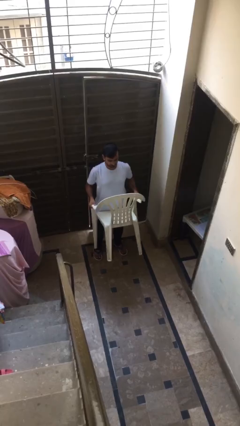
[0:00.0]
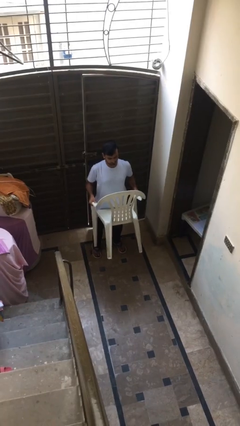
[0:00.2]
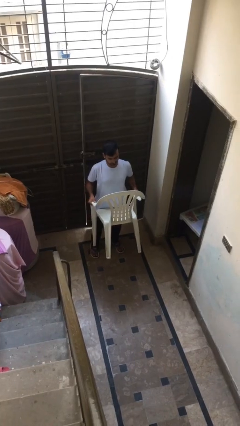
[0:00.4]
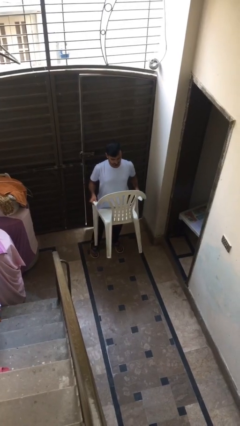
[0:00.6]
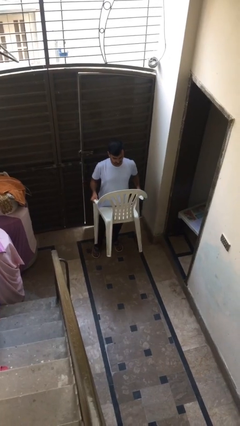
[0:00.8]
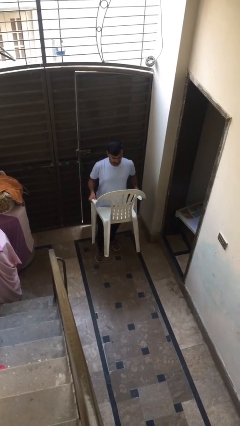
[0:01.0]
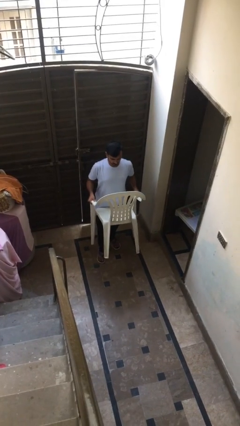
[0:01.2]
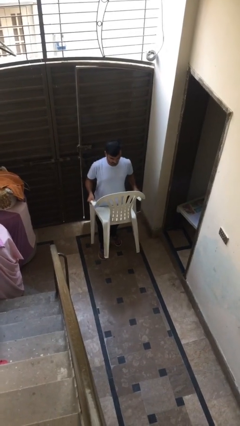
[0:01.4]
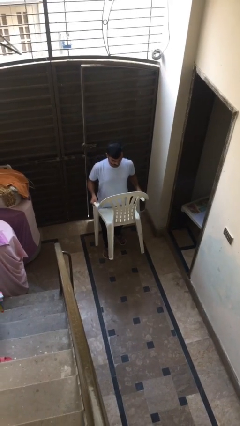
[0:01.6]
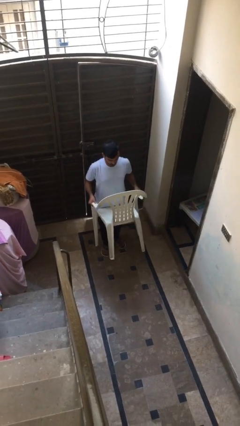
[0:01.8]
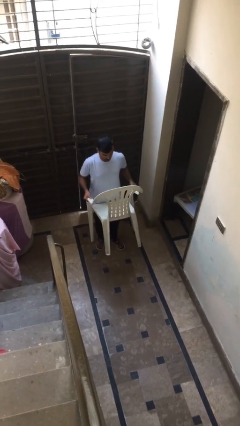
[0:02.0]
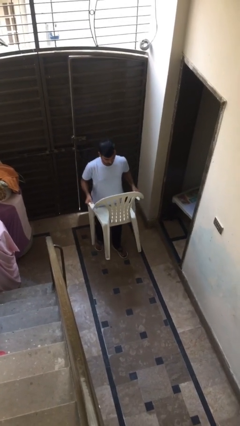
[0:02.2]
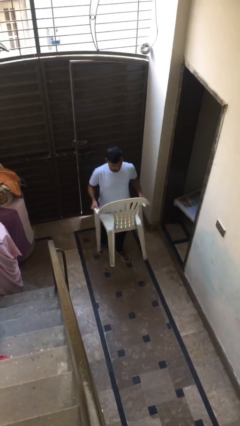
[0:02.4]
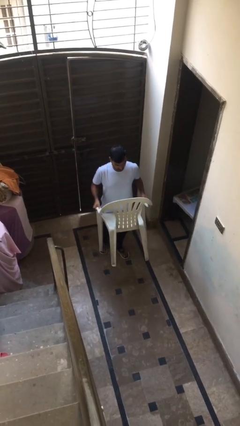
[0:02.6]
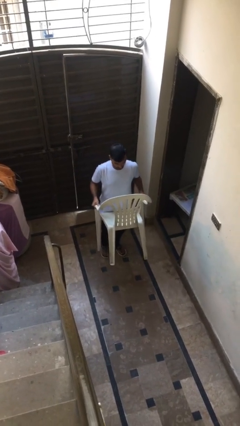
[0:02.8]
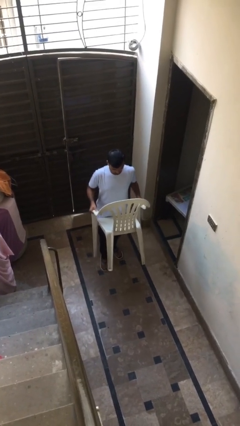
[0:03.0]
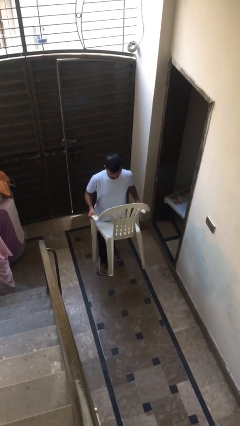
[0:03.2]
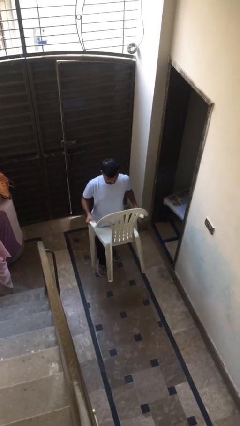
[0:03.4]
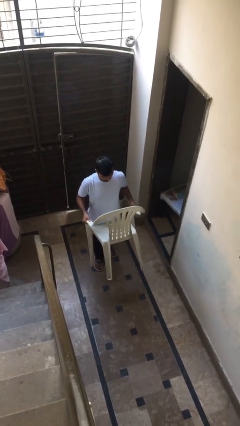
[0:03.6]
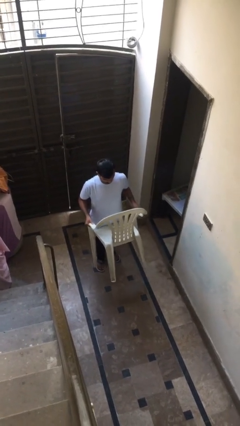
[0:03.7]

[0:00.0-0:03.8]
person carries heavy object

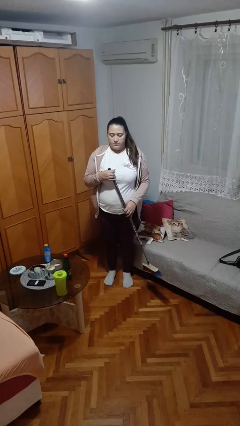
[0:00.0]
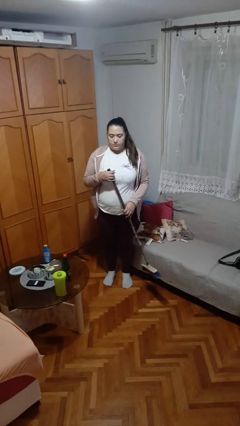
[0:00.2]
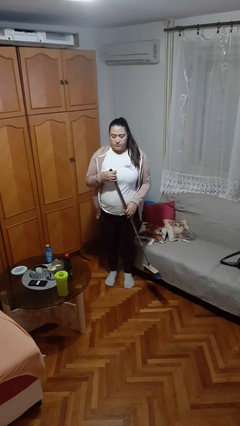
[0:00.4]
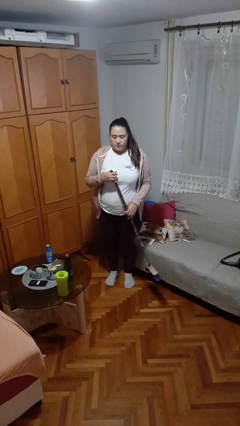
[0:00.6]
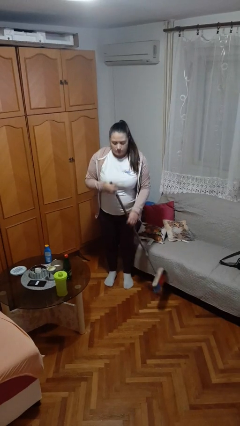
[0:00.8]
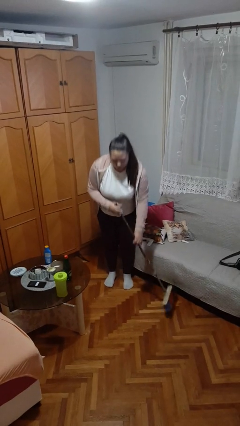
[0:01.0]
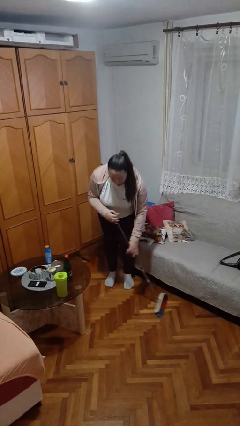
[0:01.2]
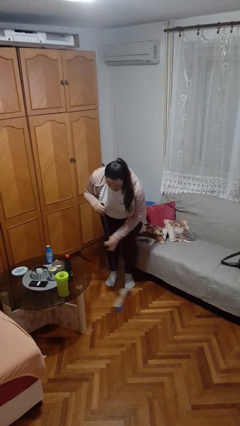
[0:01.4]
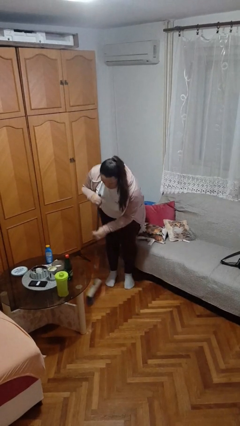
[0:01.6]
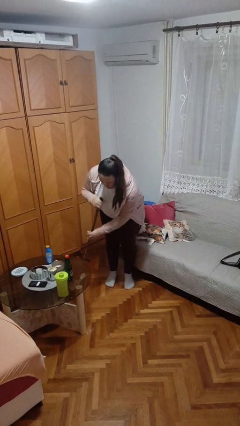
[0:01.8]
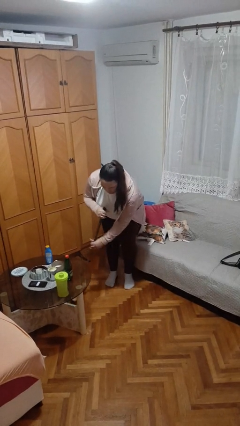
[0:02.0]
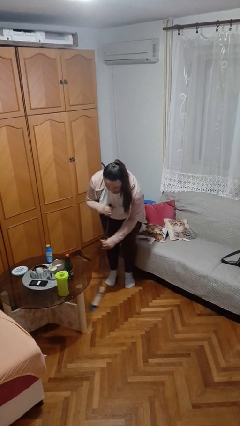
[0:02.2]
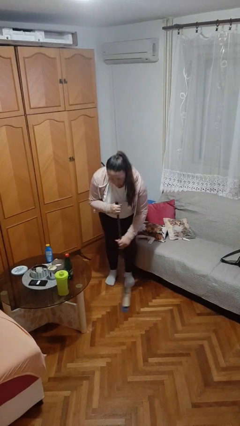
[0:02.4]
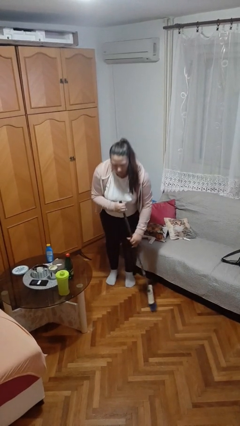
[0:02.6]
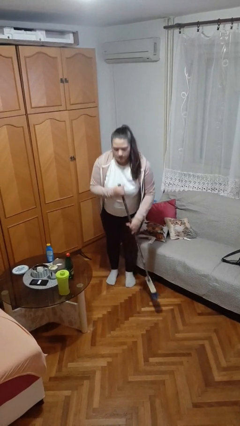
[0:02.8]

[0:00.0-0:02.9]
person sweeps floor

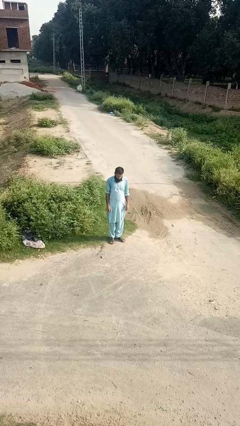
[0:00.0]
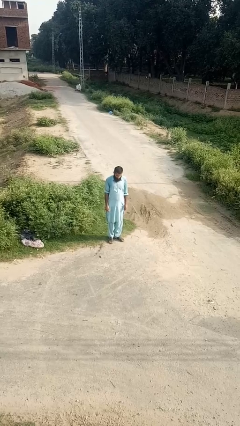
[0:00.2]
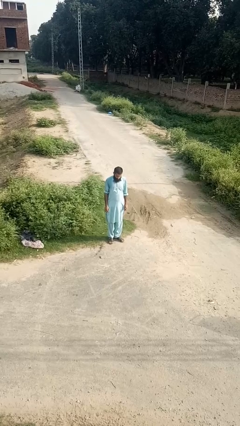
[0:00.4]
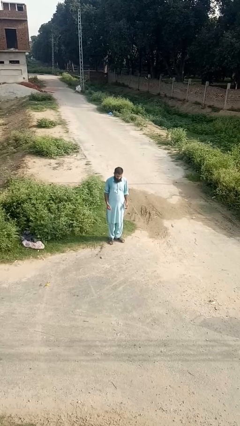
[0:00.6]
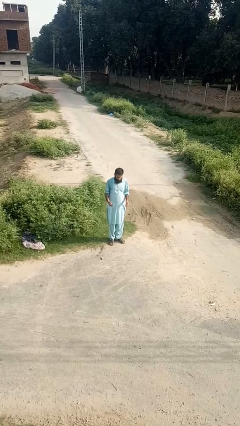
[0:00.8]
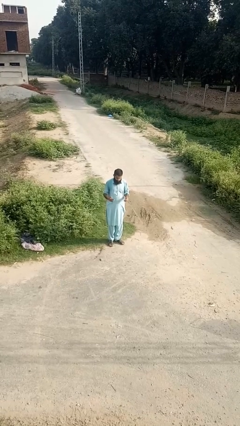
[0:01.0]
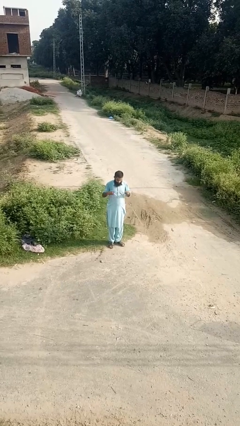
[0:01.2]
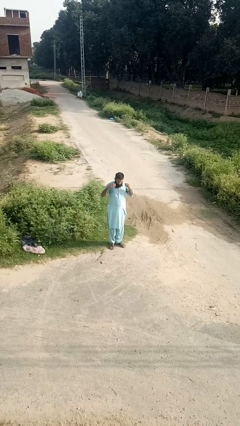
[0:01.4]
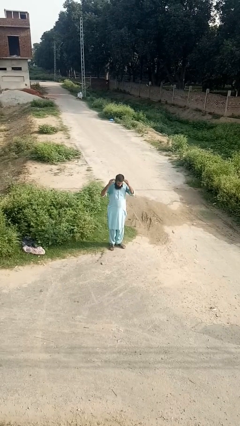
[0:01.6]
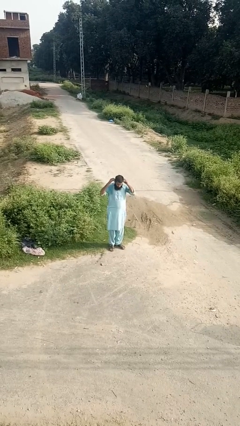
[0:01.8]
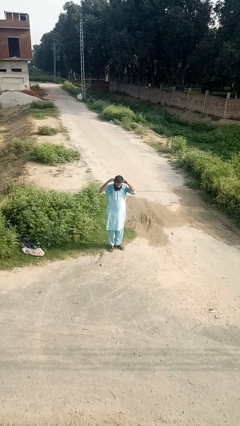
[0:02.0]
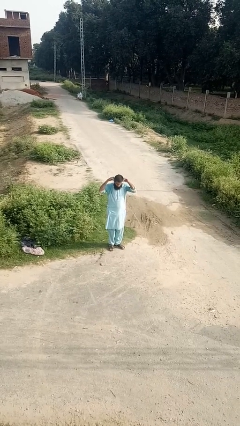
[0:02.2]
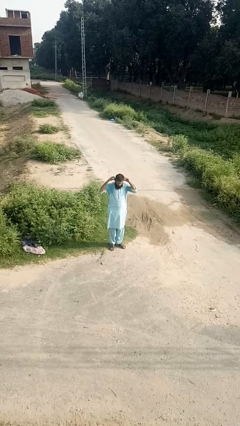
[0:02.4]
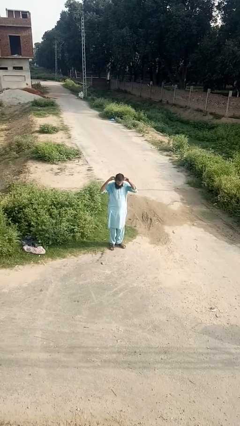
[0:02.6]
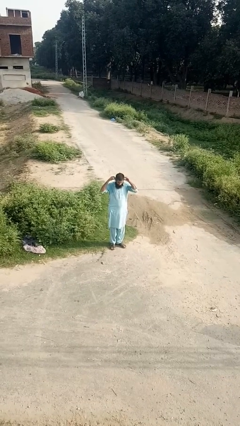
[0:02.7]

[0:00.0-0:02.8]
person puts on earrings

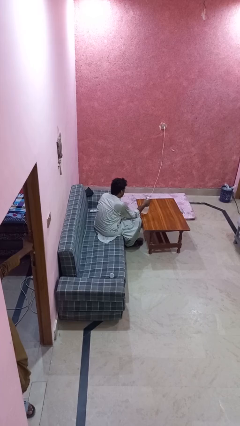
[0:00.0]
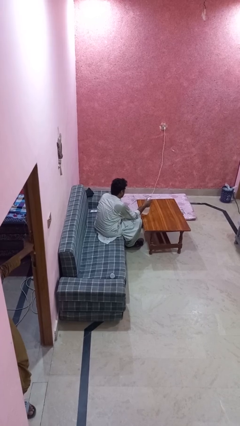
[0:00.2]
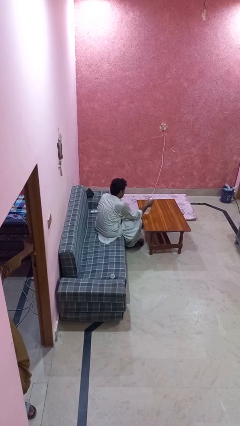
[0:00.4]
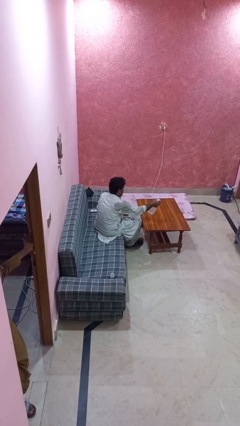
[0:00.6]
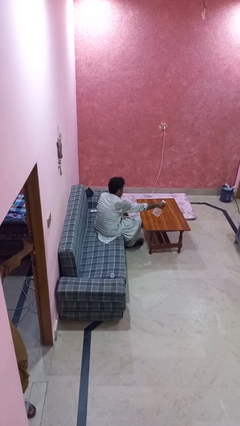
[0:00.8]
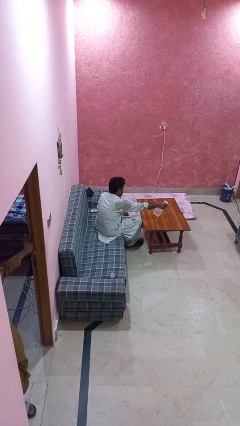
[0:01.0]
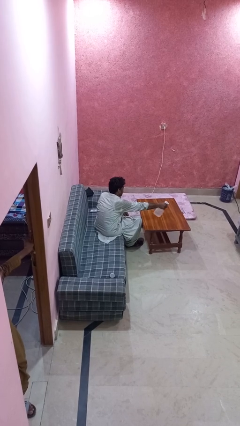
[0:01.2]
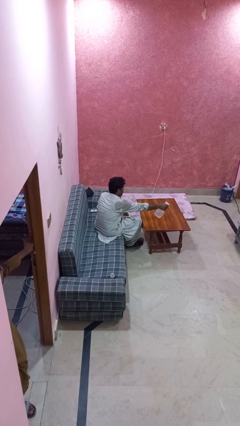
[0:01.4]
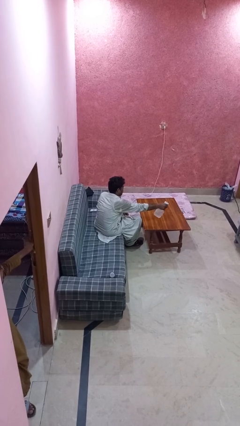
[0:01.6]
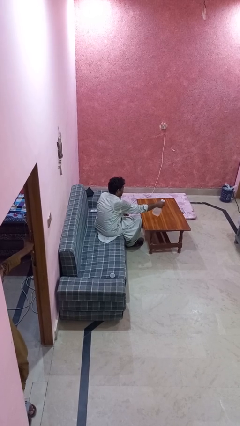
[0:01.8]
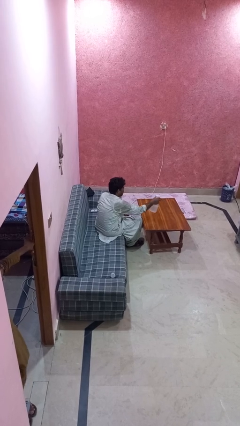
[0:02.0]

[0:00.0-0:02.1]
person sprays from bottle

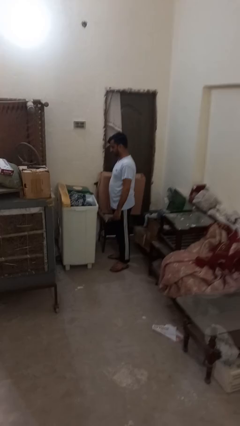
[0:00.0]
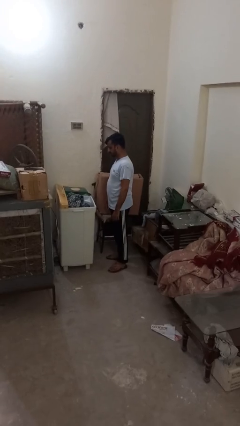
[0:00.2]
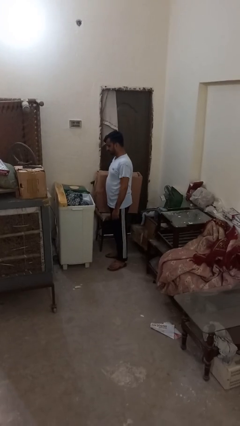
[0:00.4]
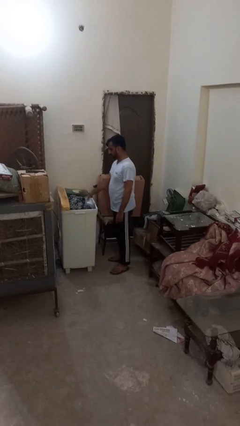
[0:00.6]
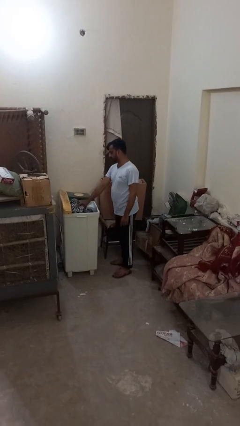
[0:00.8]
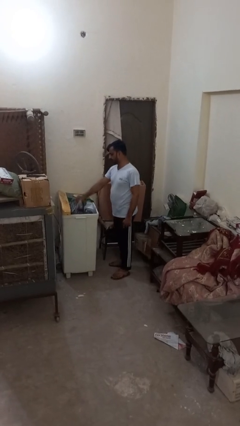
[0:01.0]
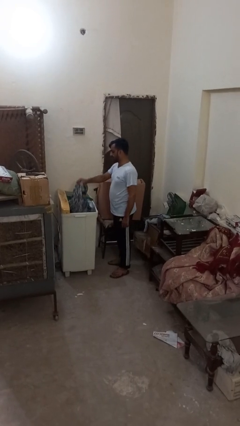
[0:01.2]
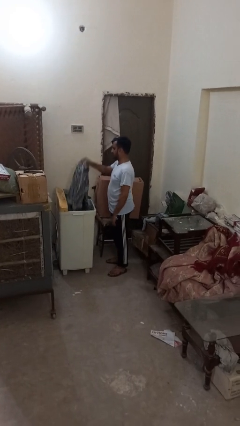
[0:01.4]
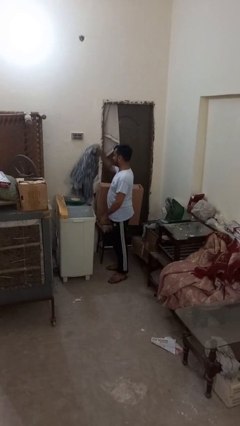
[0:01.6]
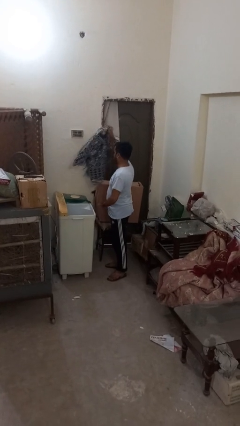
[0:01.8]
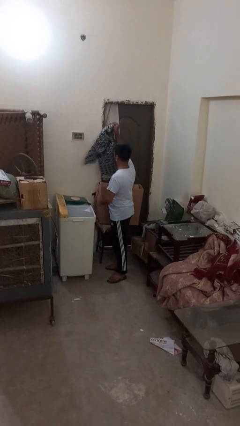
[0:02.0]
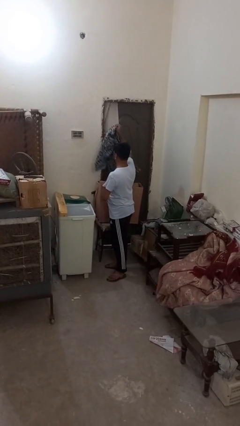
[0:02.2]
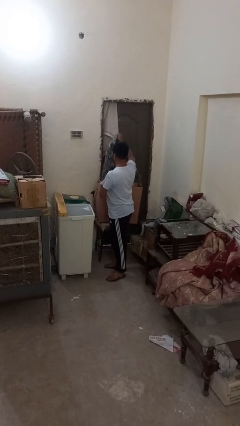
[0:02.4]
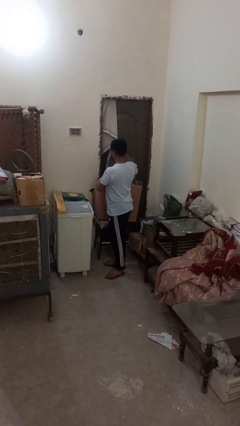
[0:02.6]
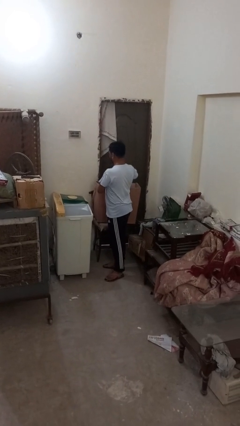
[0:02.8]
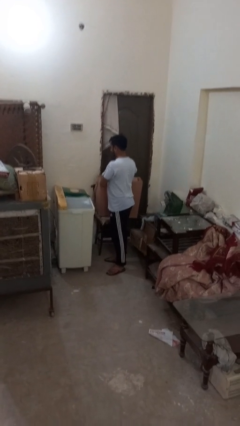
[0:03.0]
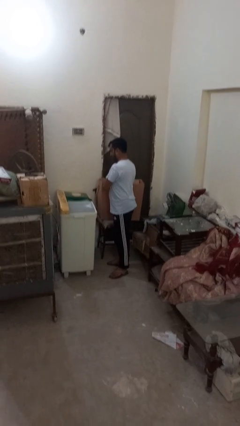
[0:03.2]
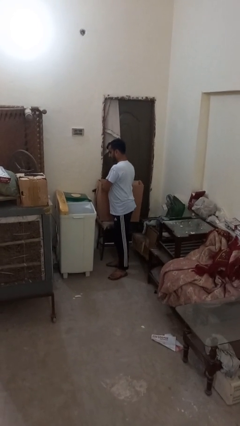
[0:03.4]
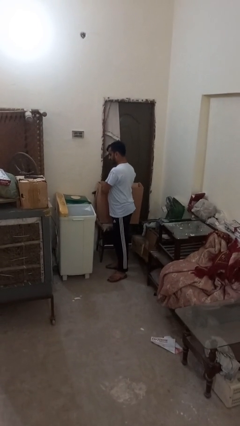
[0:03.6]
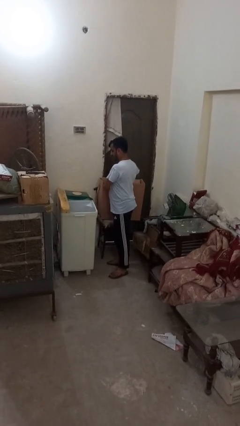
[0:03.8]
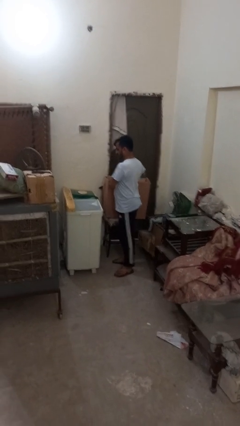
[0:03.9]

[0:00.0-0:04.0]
person unloads dryer

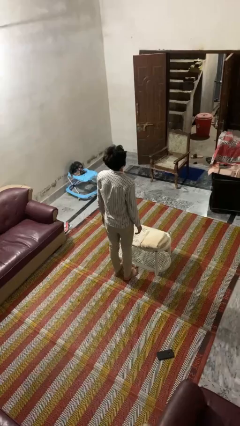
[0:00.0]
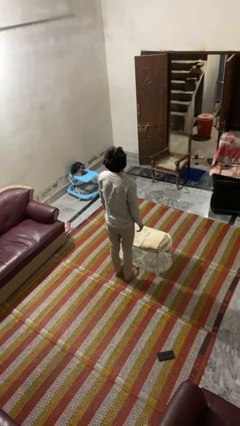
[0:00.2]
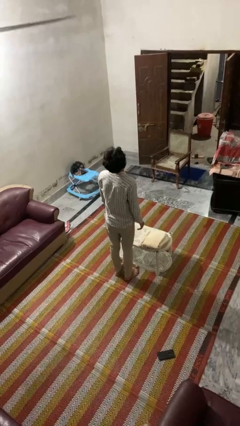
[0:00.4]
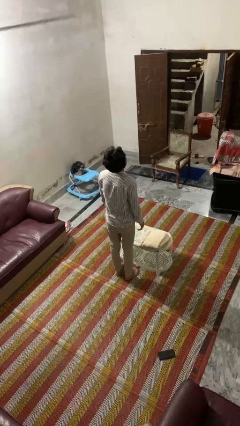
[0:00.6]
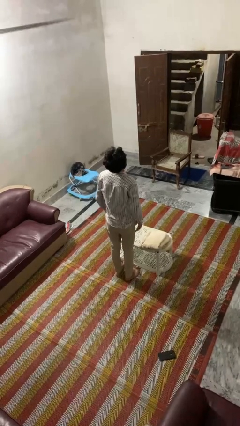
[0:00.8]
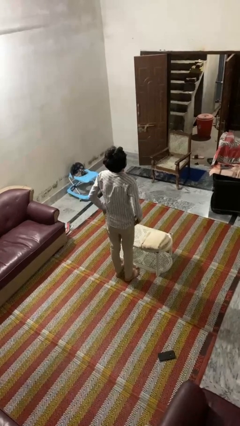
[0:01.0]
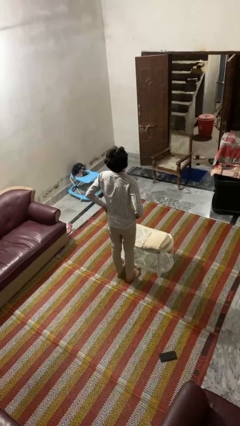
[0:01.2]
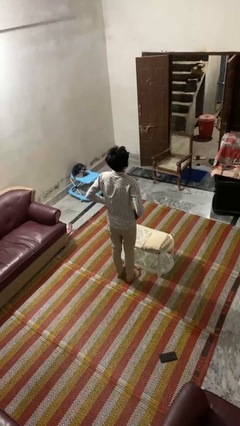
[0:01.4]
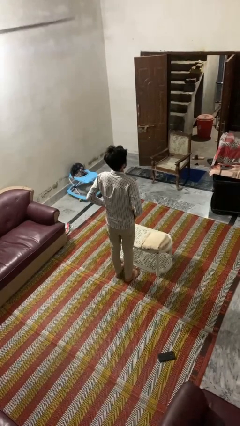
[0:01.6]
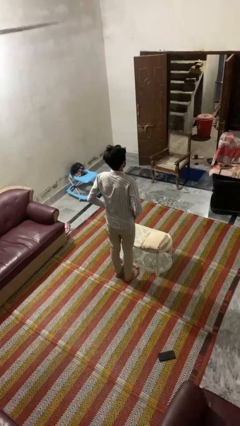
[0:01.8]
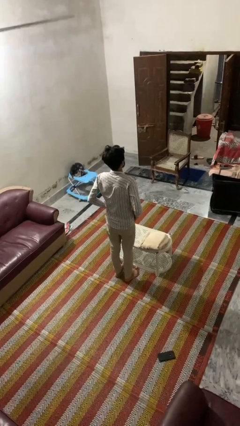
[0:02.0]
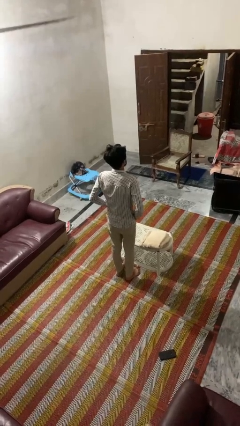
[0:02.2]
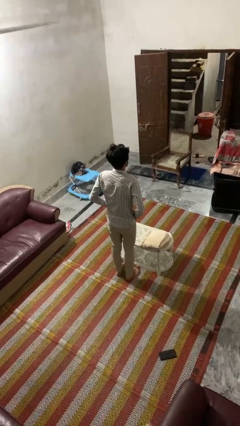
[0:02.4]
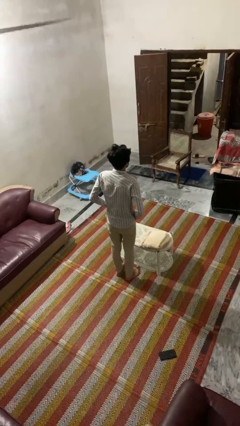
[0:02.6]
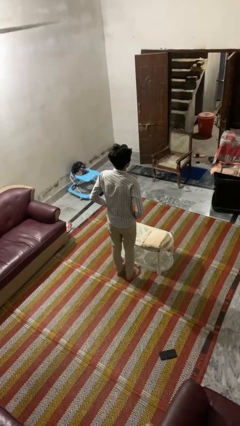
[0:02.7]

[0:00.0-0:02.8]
person puts hands in back pockets
